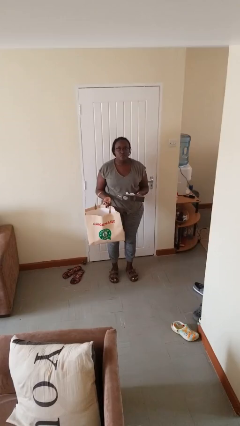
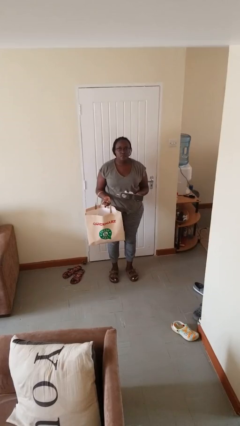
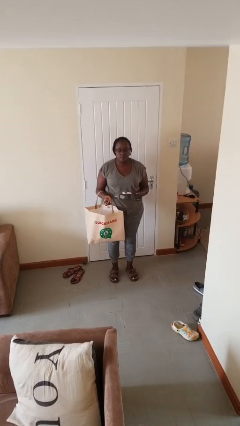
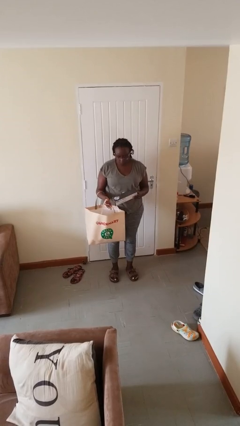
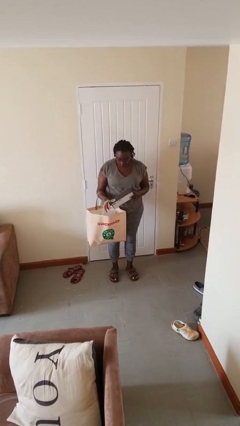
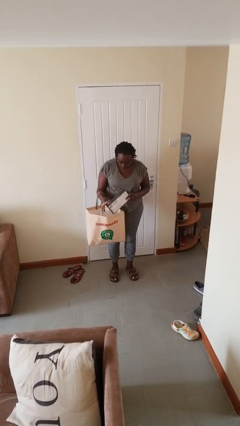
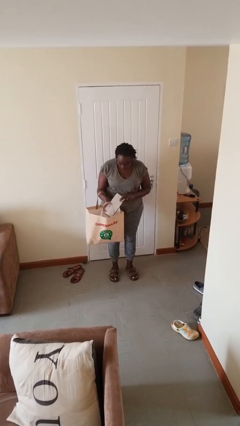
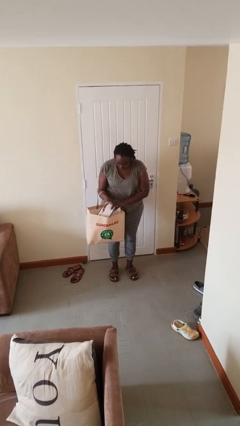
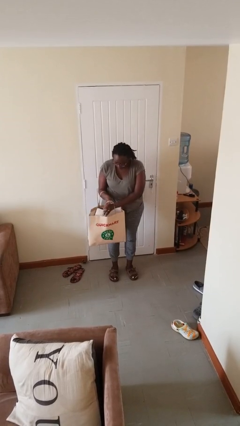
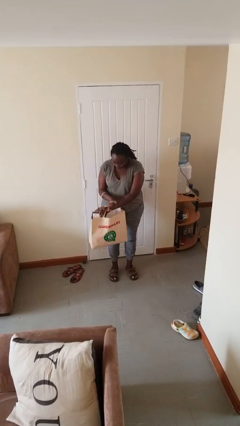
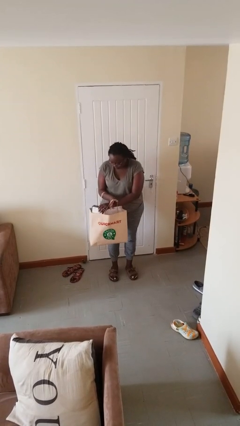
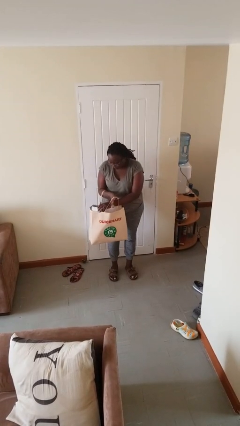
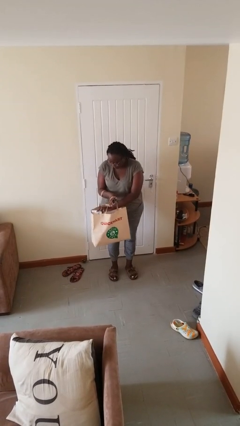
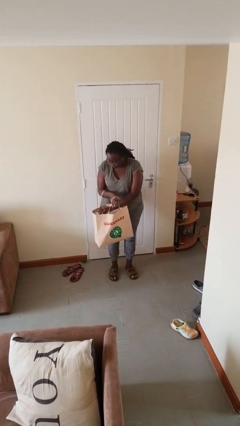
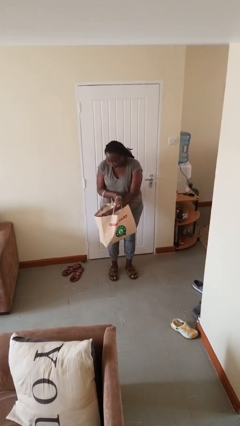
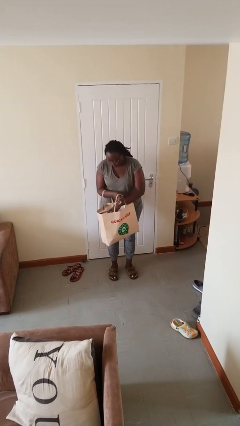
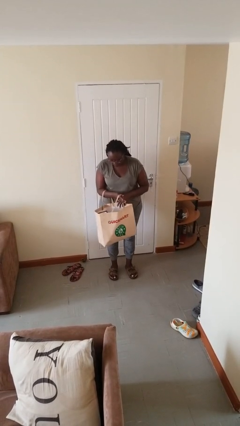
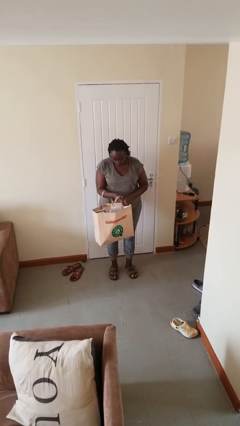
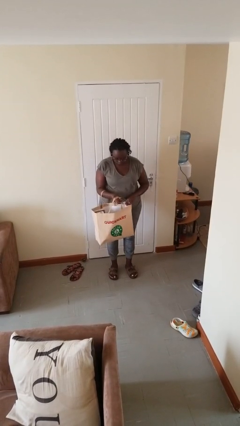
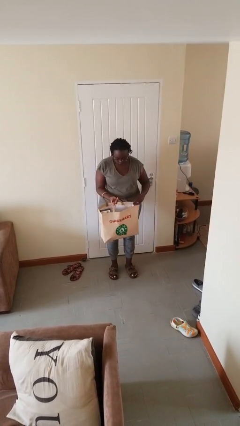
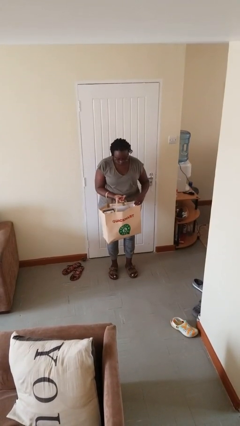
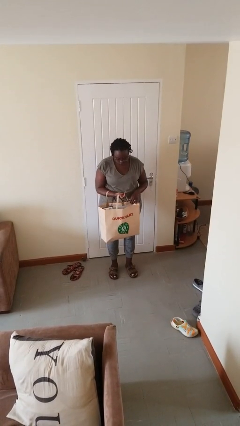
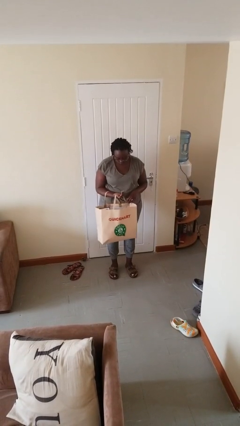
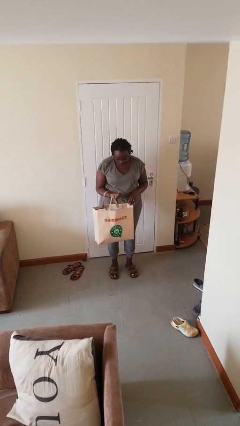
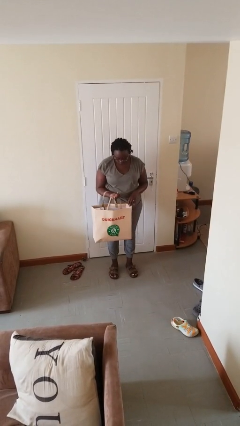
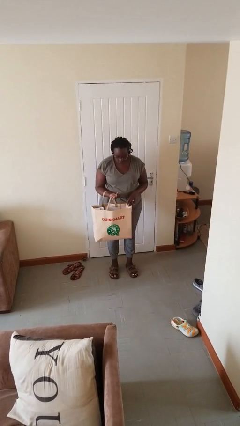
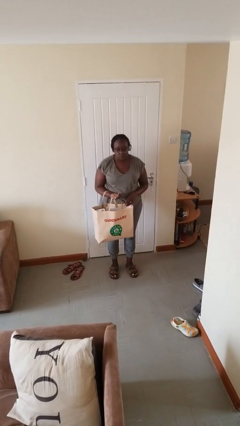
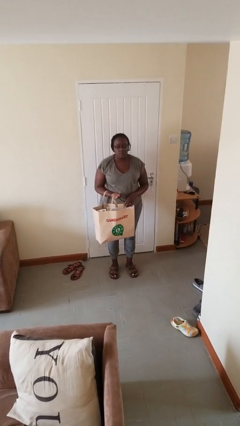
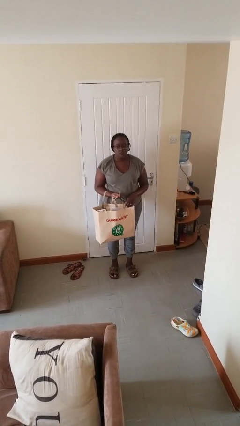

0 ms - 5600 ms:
person puts object into bag

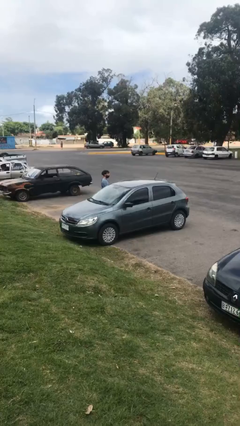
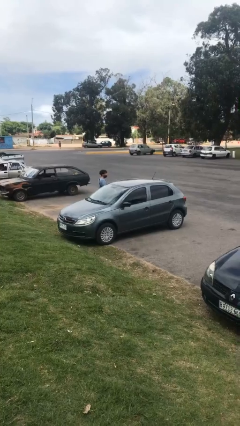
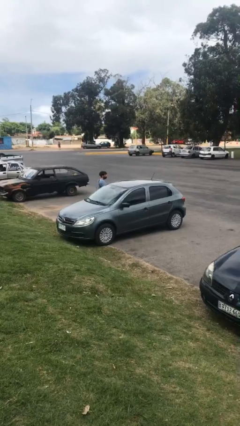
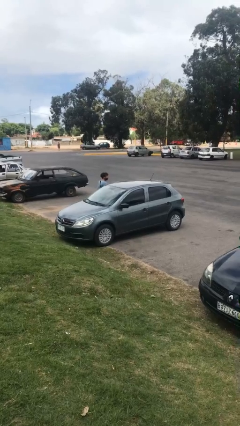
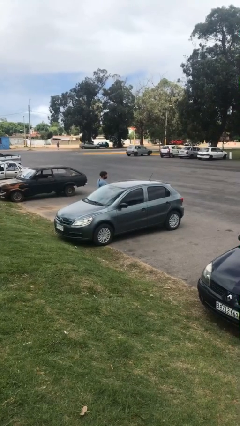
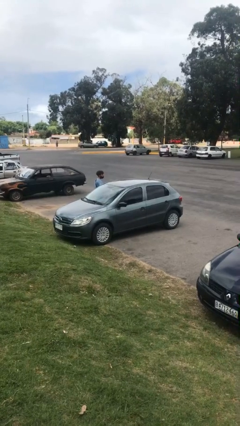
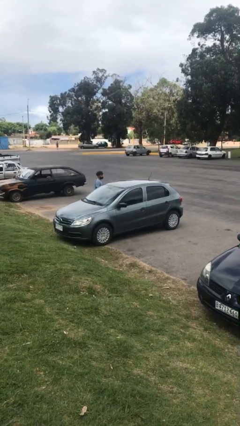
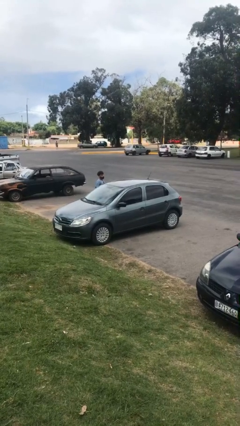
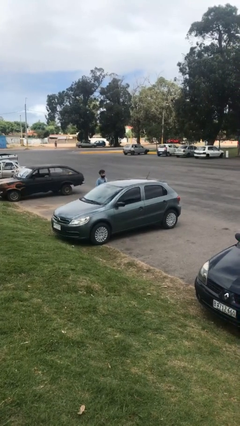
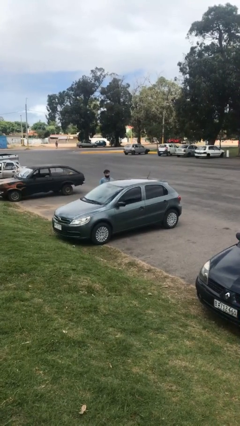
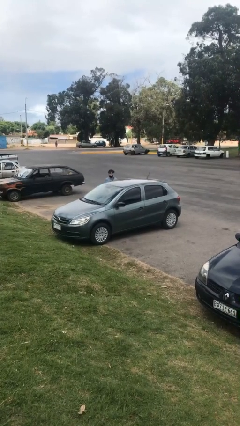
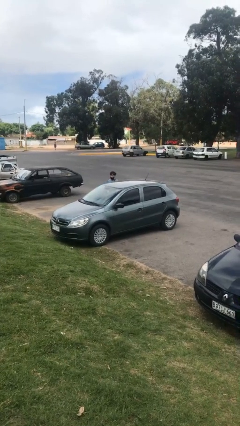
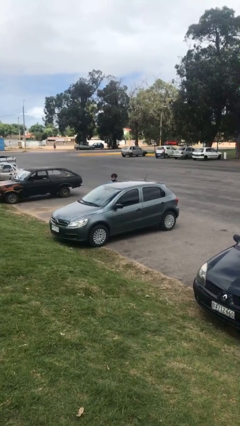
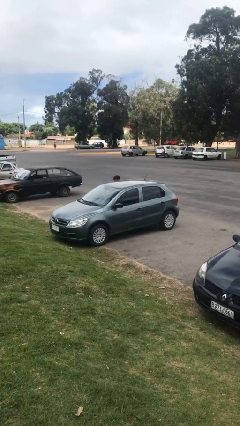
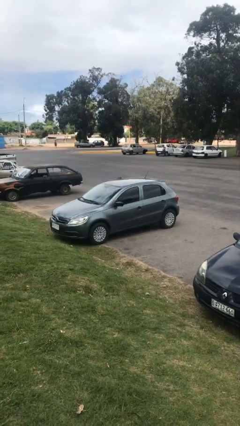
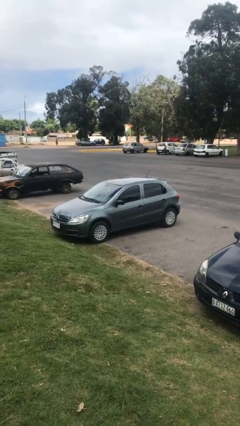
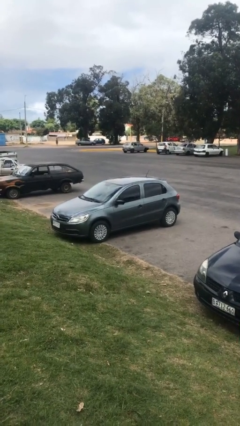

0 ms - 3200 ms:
car picks up person

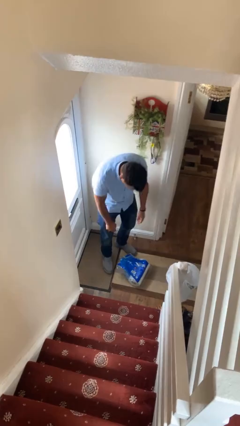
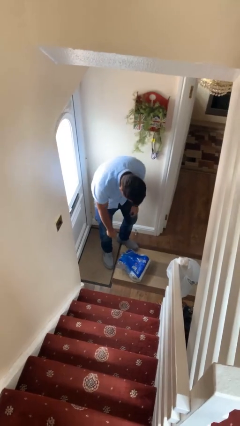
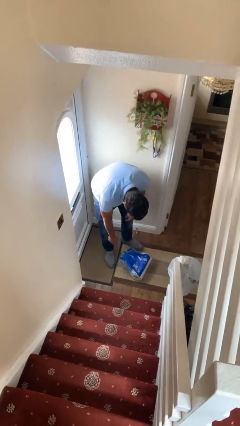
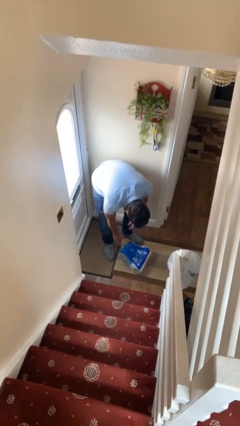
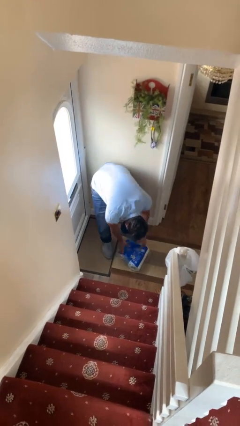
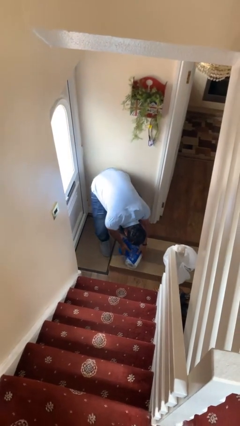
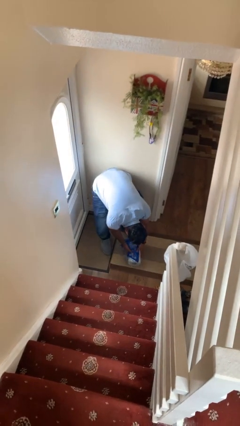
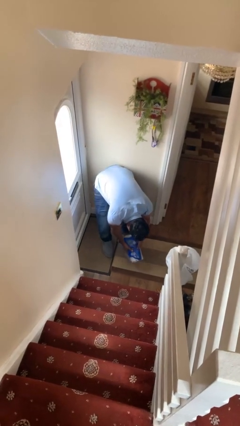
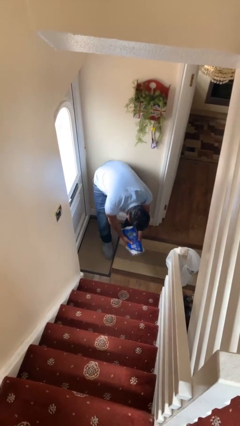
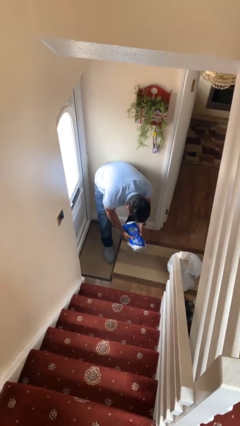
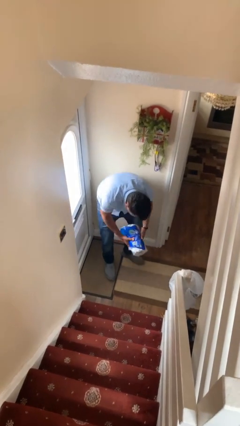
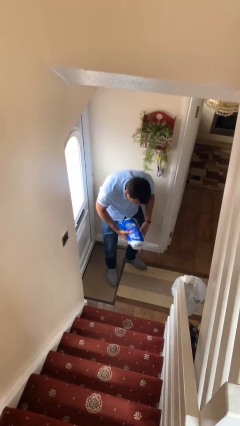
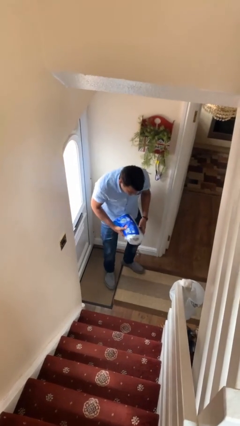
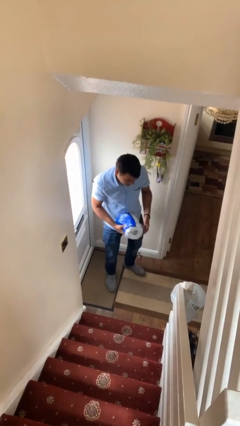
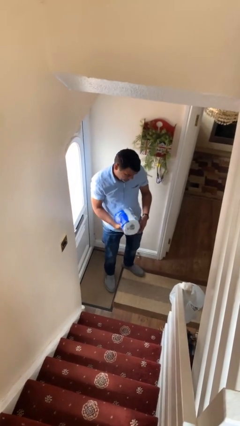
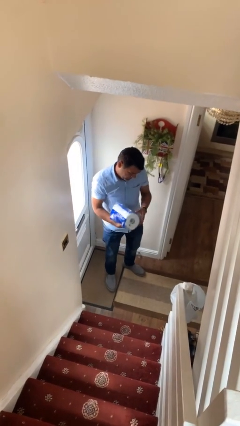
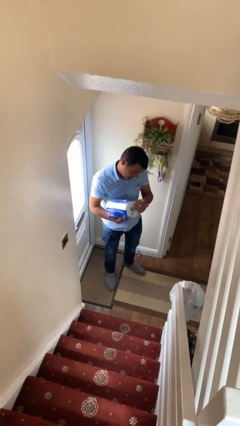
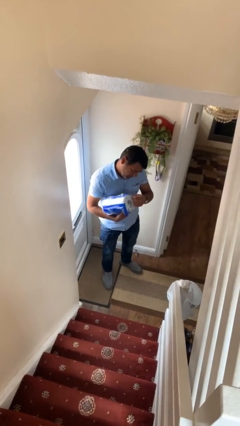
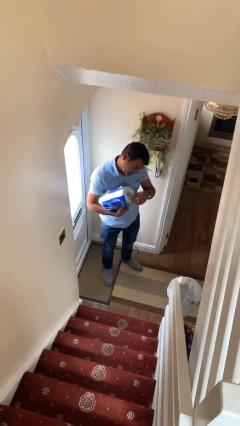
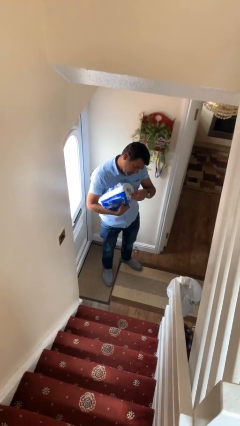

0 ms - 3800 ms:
person picks up object from floor

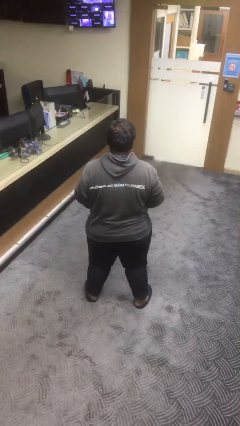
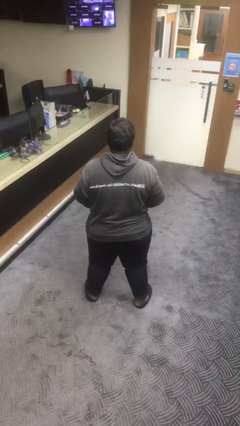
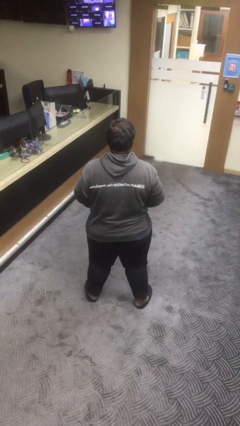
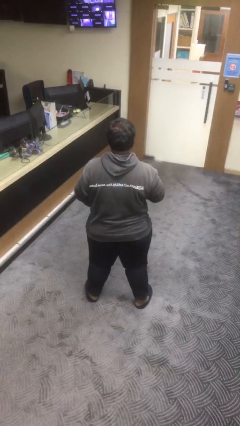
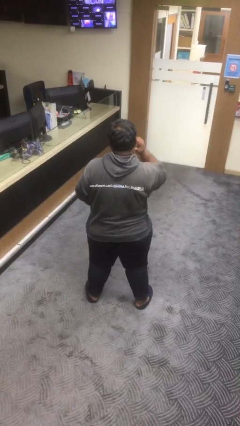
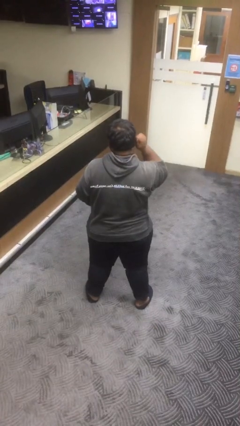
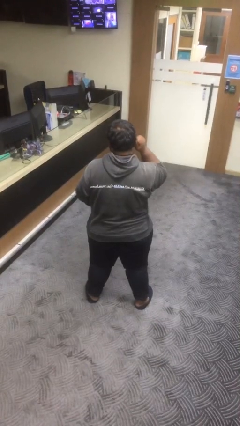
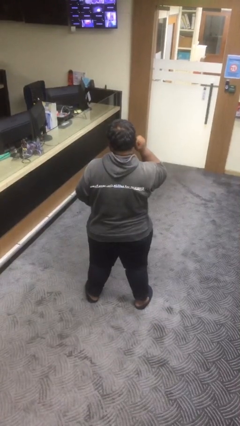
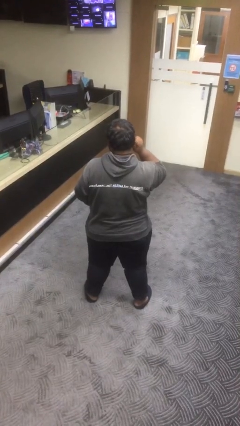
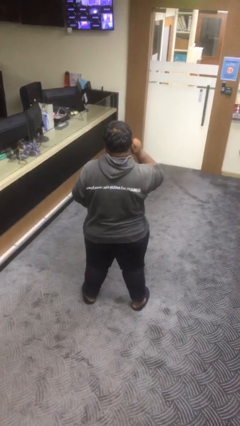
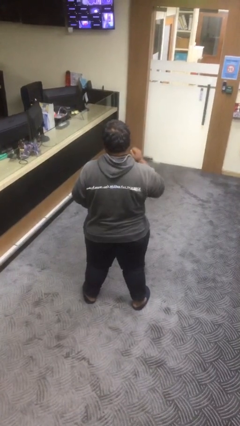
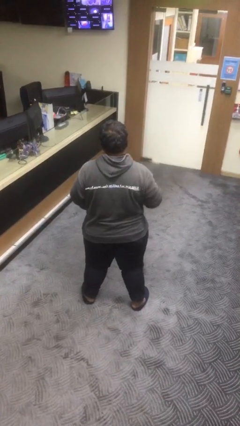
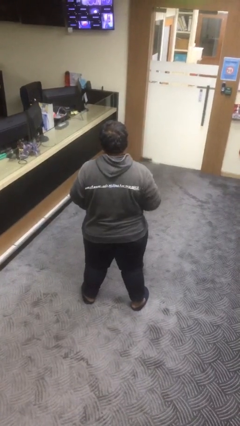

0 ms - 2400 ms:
person touches earlobe

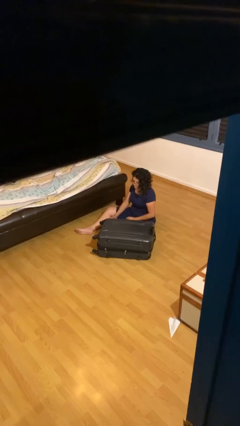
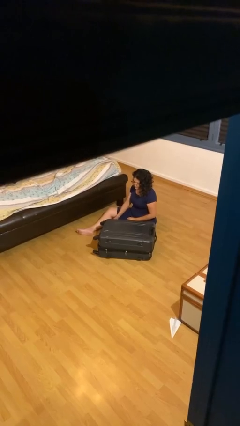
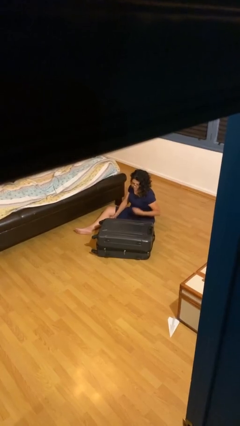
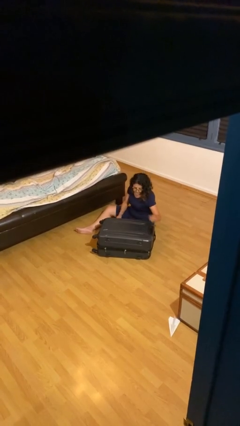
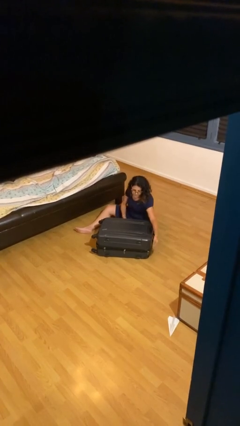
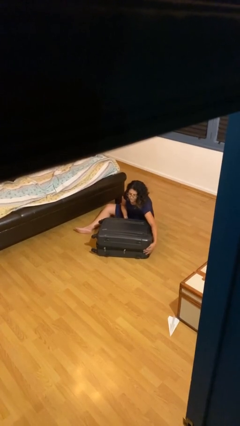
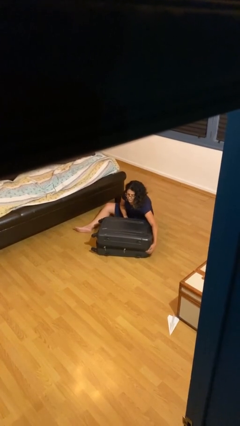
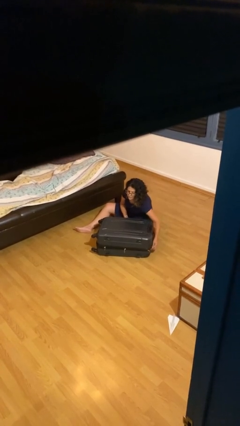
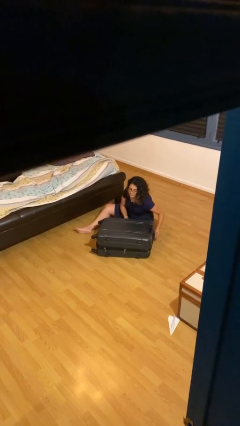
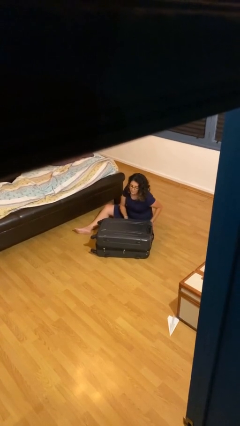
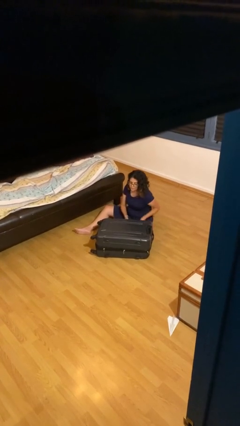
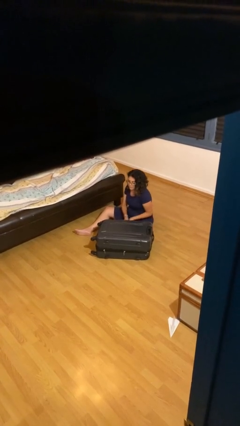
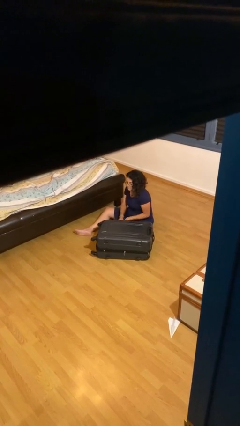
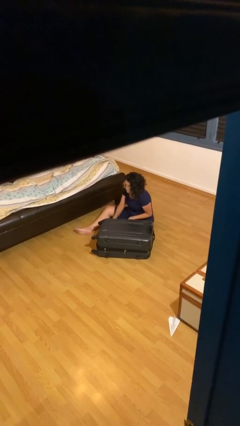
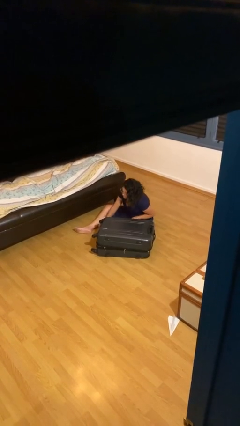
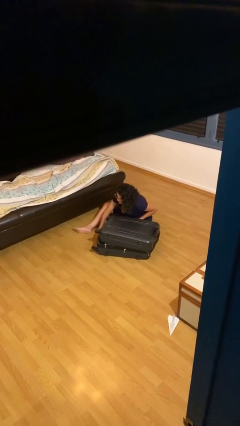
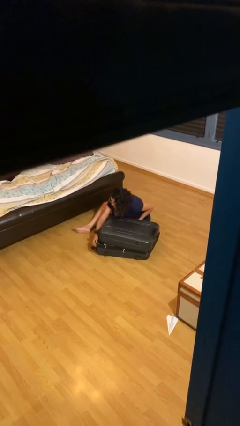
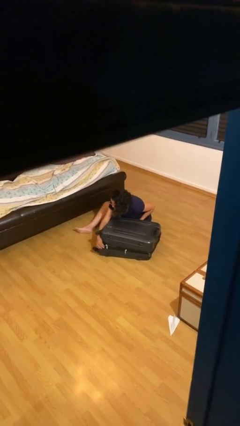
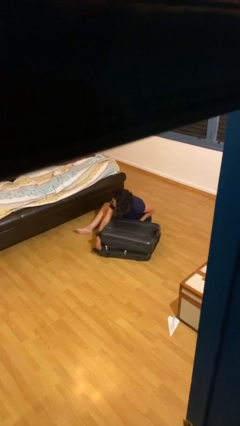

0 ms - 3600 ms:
person opens suitcase
